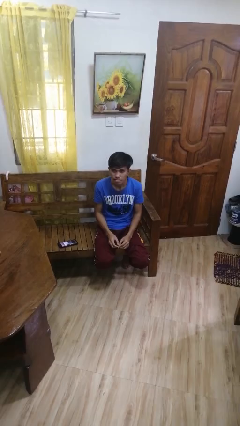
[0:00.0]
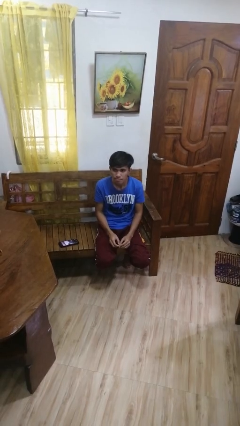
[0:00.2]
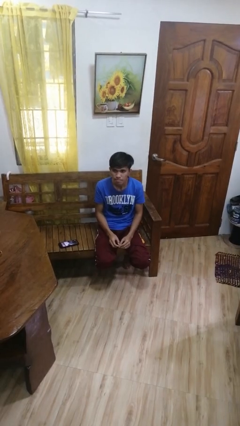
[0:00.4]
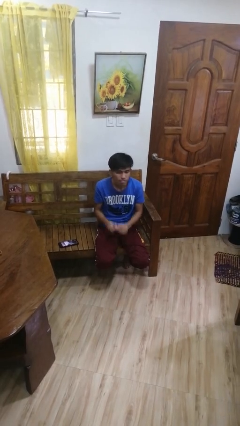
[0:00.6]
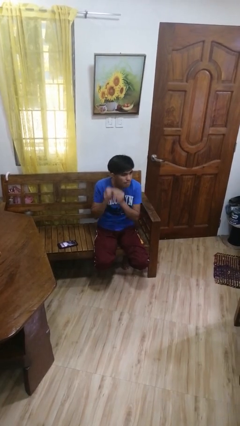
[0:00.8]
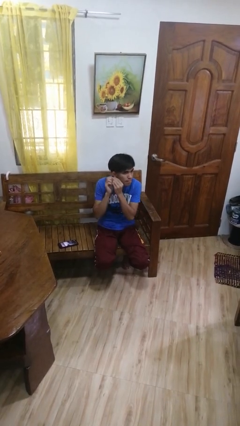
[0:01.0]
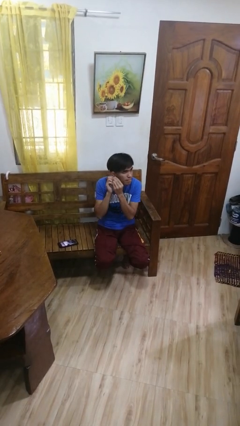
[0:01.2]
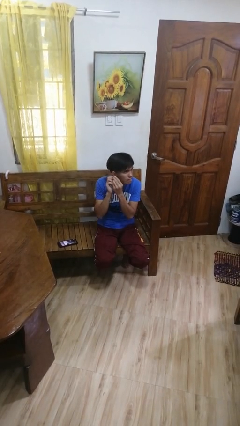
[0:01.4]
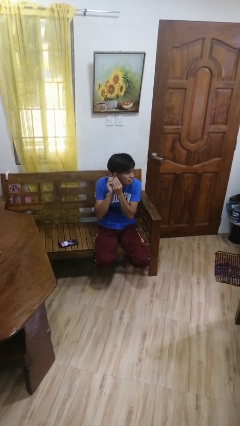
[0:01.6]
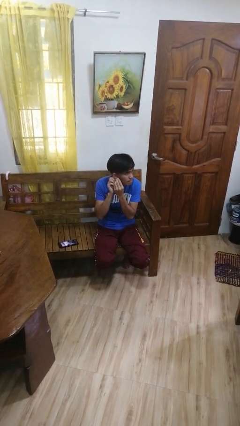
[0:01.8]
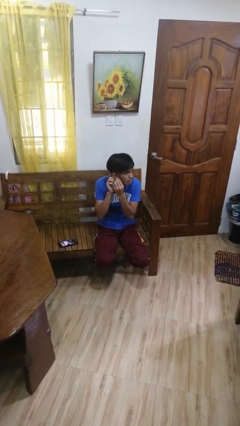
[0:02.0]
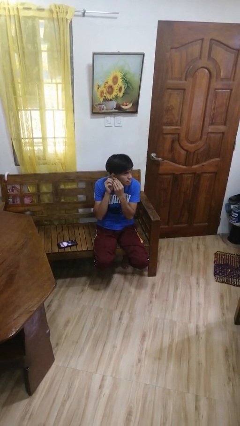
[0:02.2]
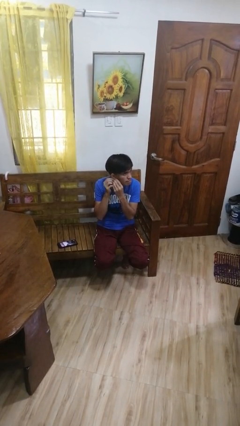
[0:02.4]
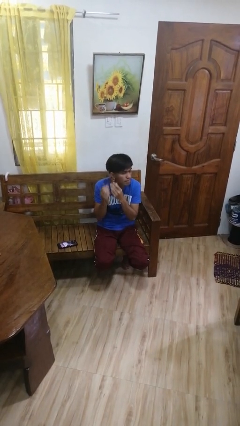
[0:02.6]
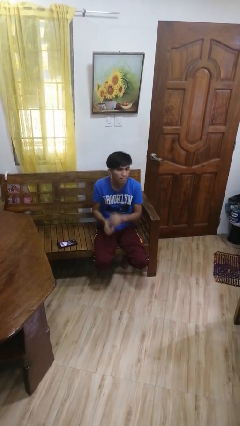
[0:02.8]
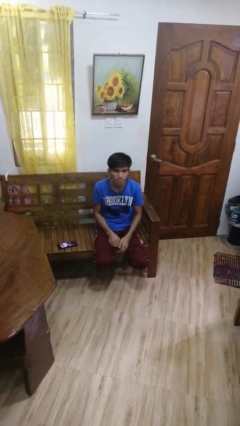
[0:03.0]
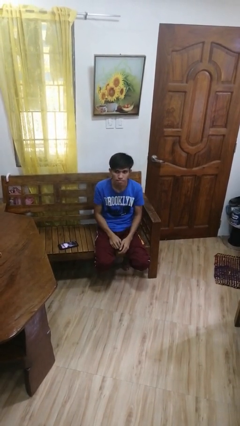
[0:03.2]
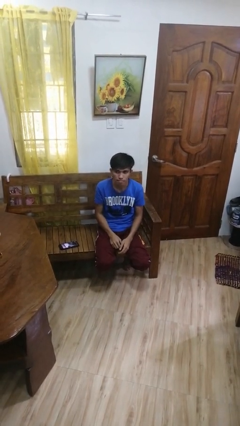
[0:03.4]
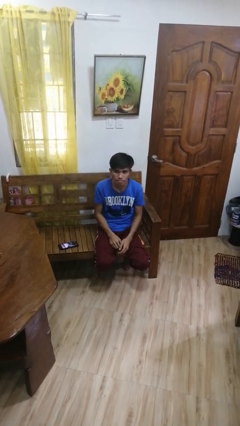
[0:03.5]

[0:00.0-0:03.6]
person puts on earrings

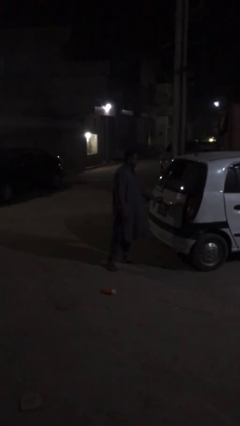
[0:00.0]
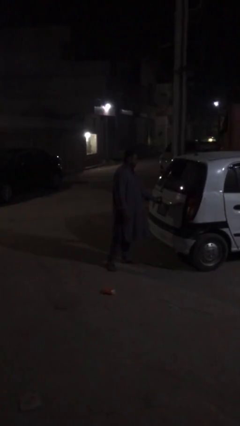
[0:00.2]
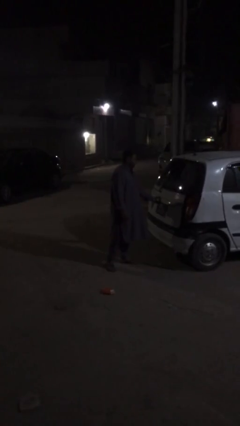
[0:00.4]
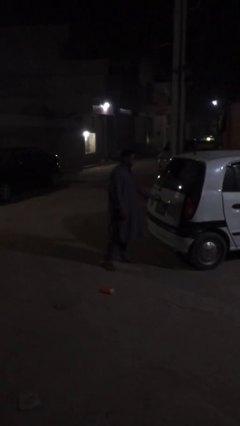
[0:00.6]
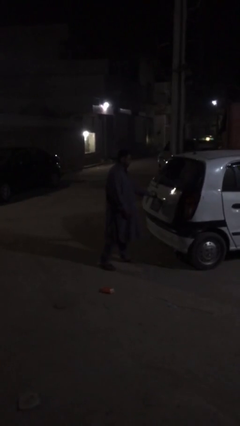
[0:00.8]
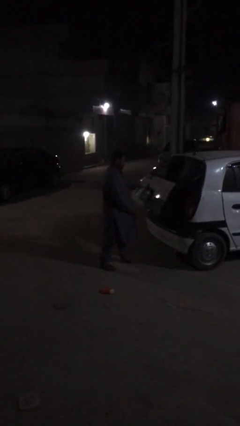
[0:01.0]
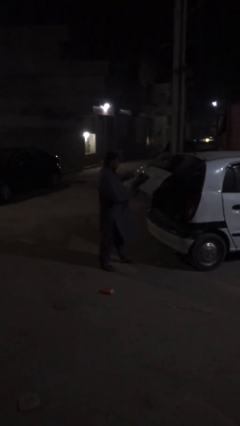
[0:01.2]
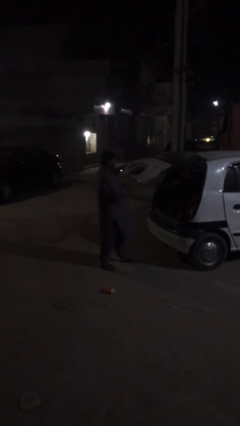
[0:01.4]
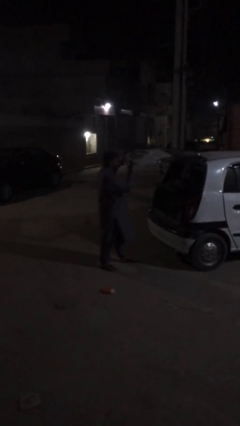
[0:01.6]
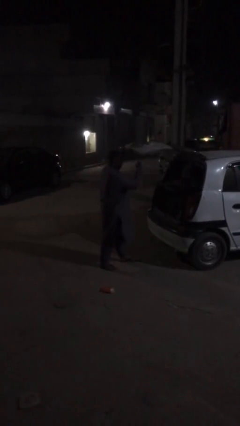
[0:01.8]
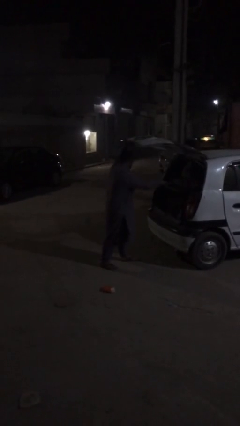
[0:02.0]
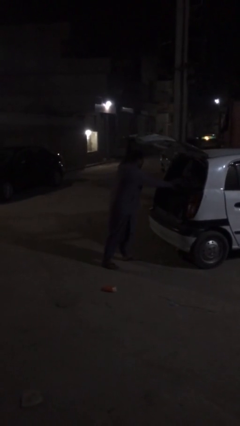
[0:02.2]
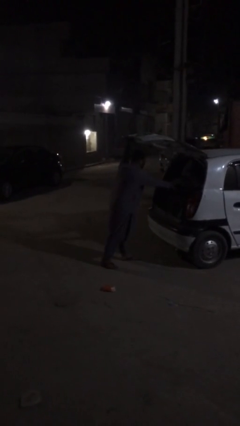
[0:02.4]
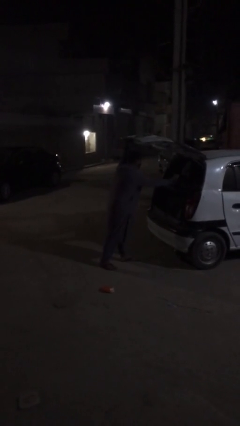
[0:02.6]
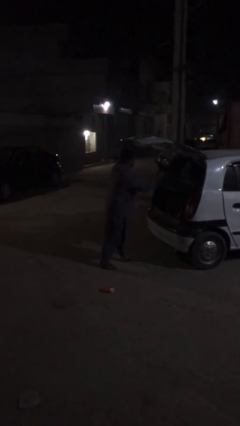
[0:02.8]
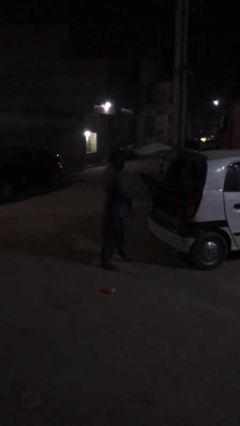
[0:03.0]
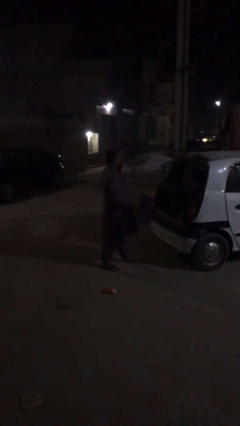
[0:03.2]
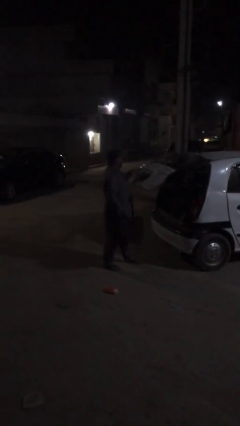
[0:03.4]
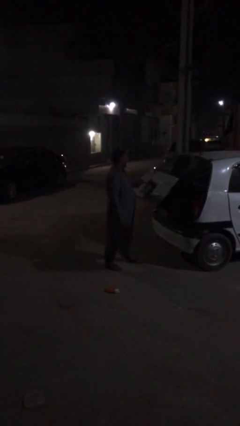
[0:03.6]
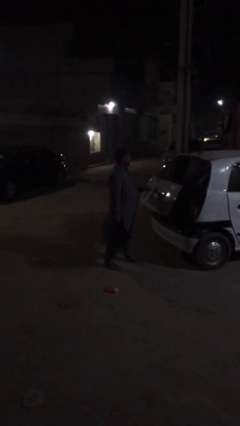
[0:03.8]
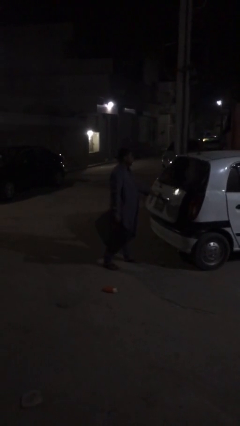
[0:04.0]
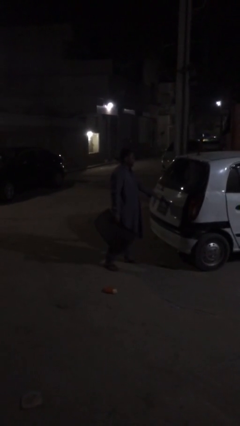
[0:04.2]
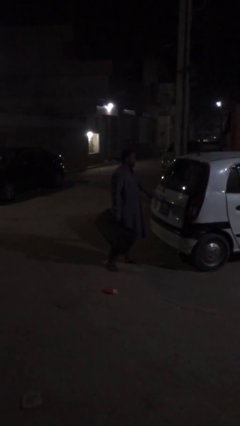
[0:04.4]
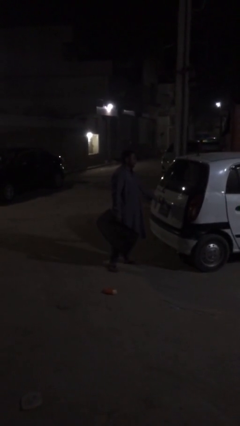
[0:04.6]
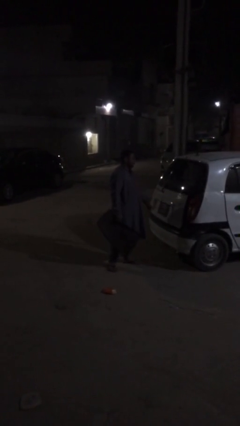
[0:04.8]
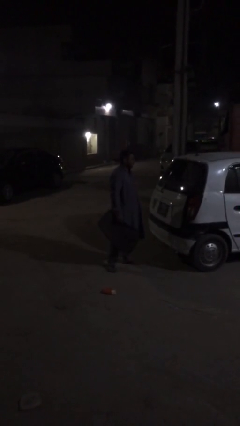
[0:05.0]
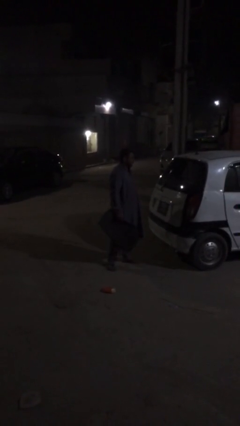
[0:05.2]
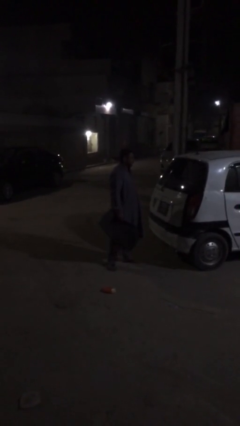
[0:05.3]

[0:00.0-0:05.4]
person unloads car

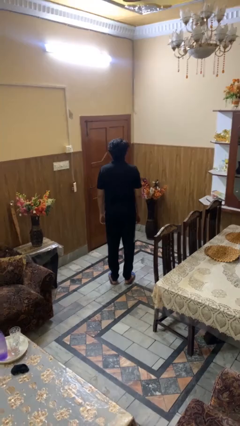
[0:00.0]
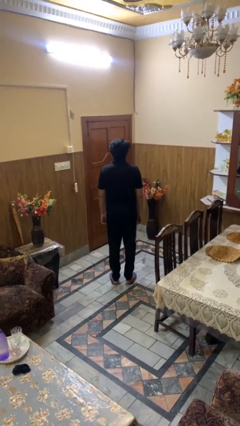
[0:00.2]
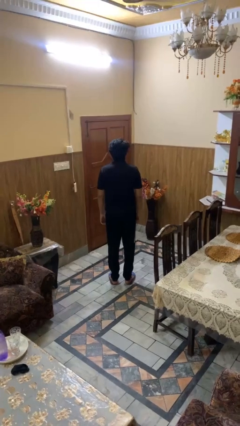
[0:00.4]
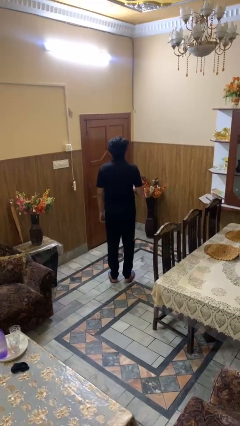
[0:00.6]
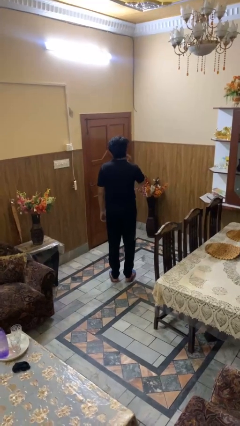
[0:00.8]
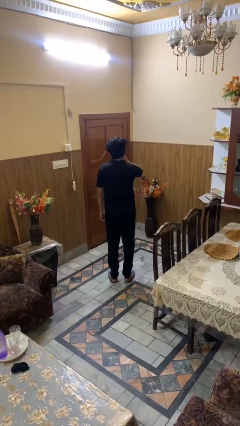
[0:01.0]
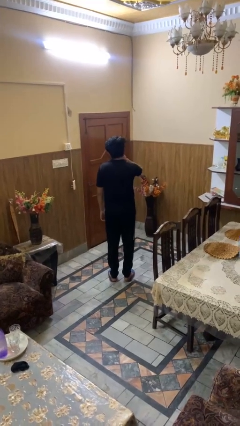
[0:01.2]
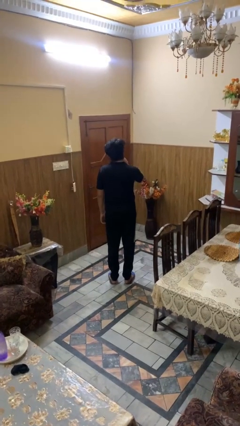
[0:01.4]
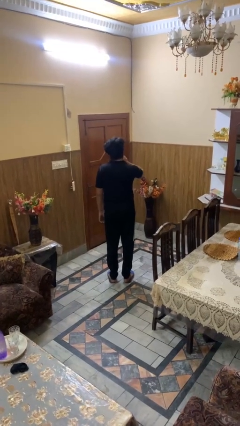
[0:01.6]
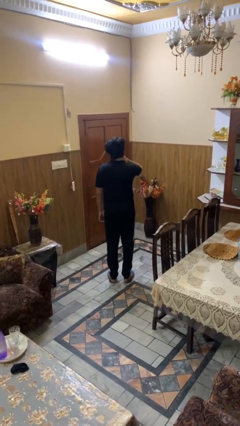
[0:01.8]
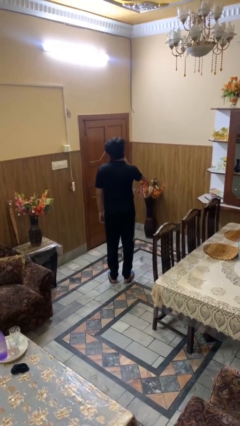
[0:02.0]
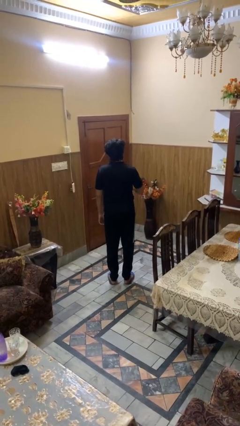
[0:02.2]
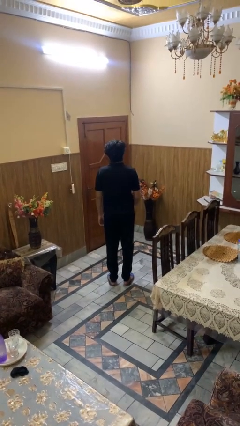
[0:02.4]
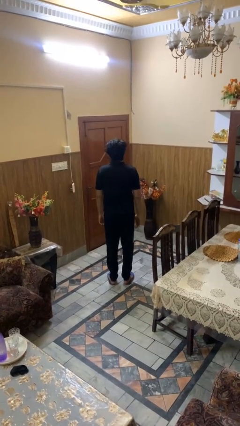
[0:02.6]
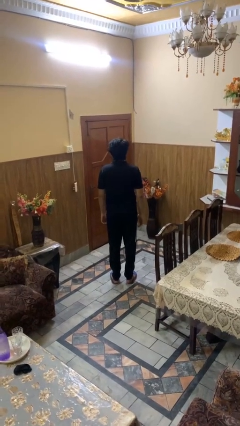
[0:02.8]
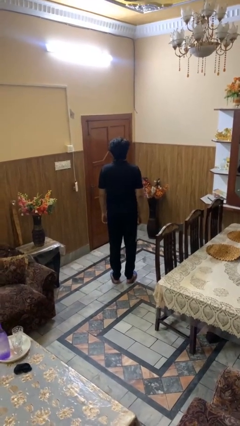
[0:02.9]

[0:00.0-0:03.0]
person rubs neck

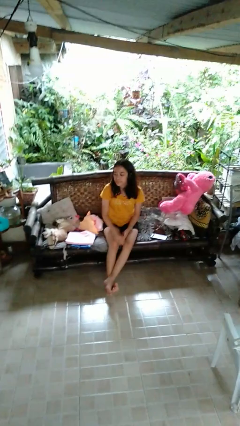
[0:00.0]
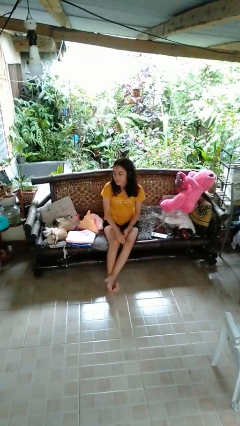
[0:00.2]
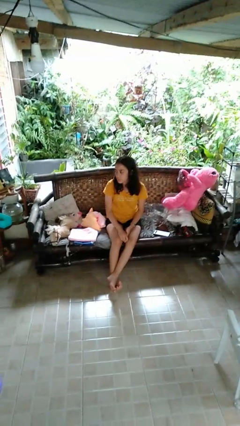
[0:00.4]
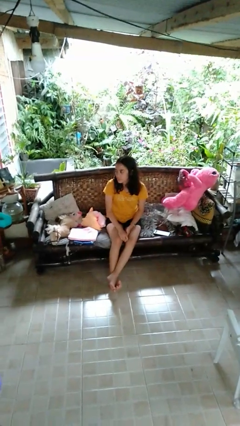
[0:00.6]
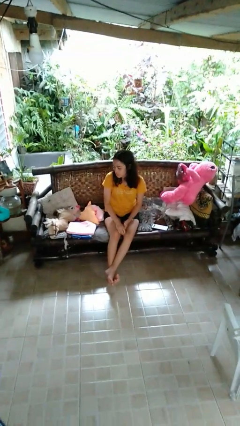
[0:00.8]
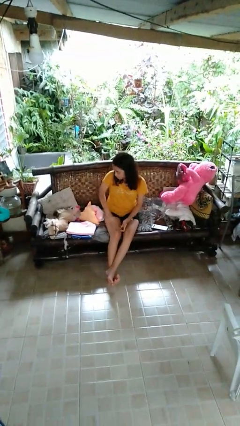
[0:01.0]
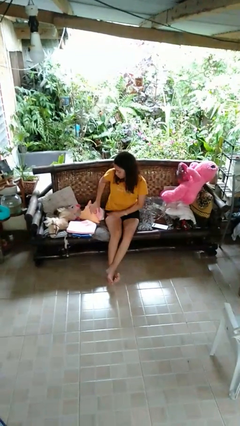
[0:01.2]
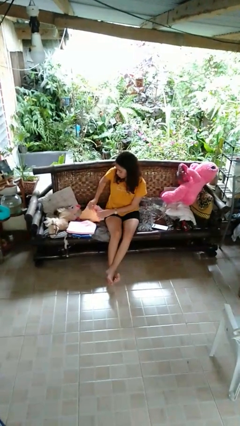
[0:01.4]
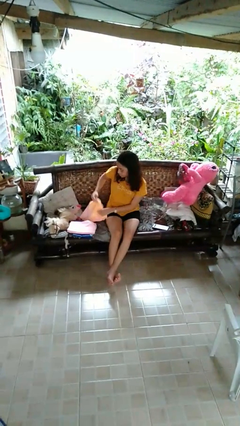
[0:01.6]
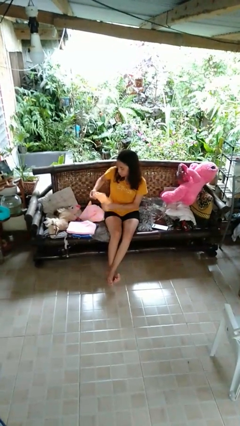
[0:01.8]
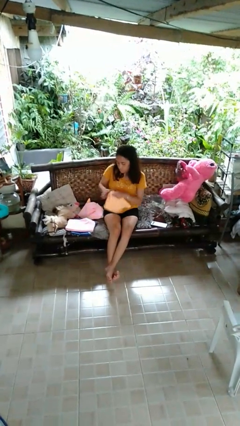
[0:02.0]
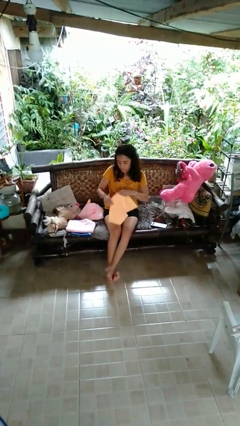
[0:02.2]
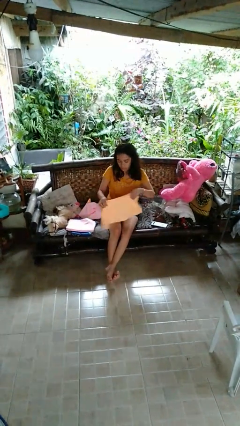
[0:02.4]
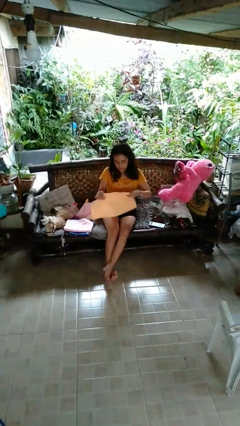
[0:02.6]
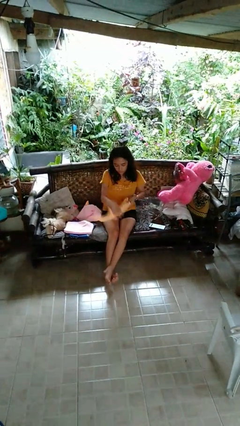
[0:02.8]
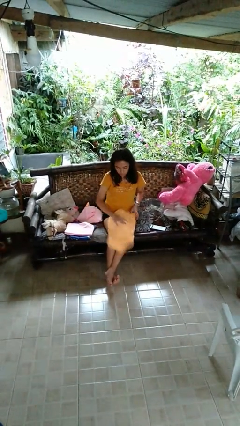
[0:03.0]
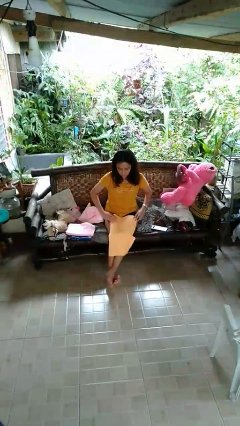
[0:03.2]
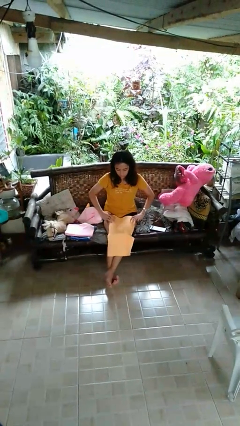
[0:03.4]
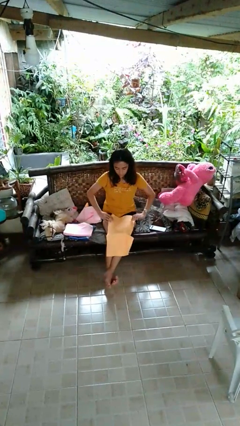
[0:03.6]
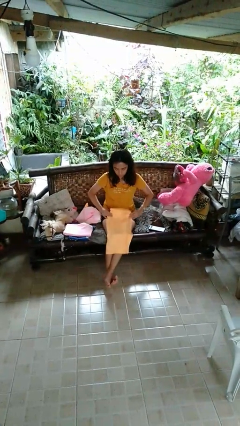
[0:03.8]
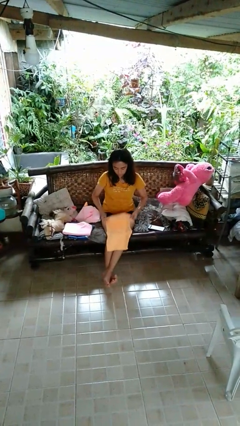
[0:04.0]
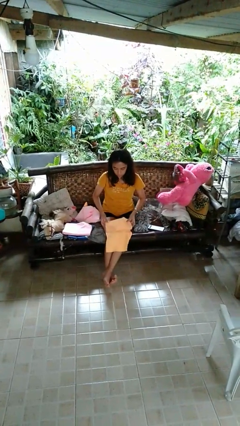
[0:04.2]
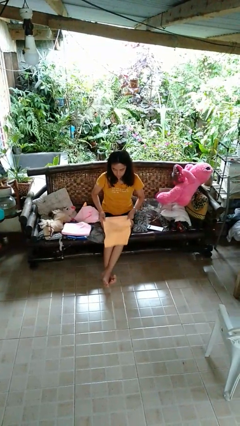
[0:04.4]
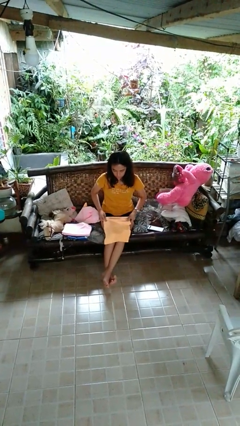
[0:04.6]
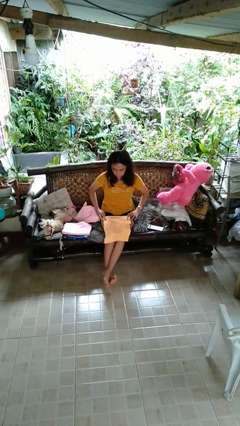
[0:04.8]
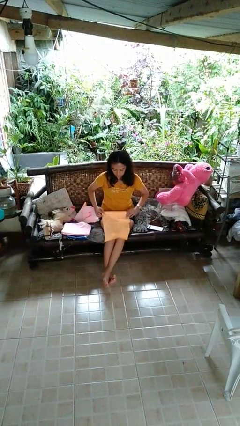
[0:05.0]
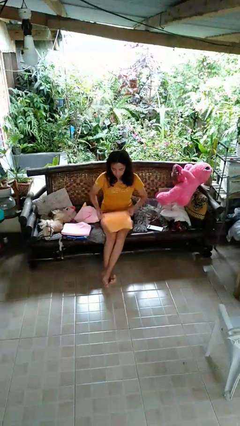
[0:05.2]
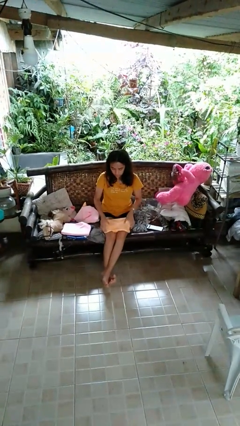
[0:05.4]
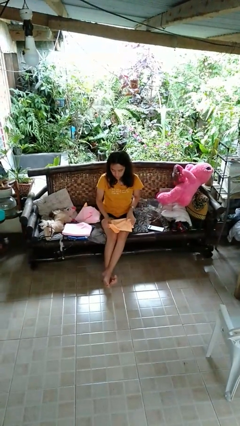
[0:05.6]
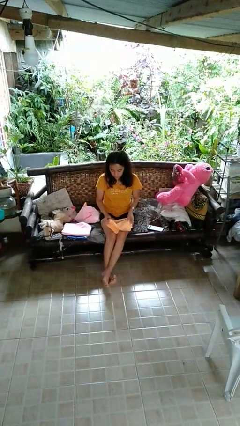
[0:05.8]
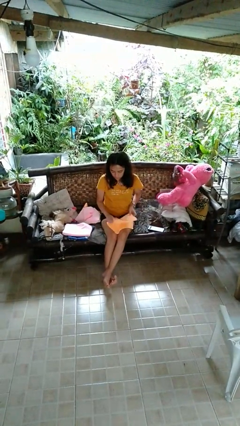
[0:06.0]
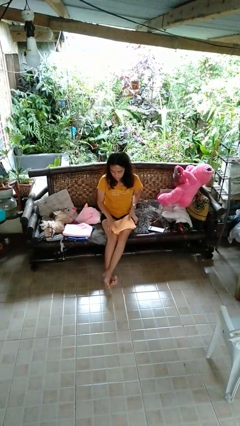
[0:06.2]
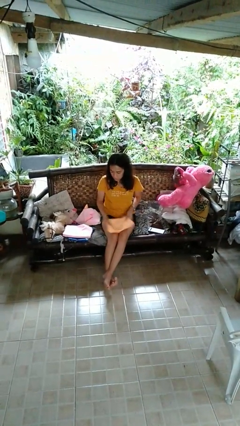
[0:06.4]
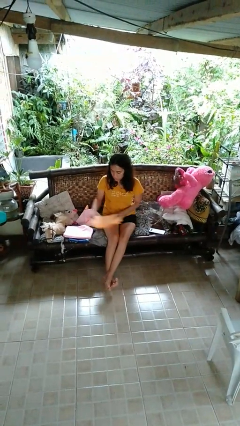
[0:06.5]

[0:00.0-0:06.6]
person folds towel
